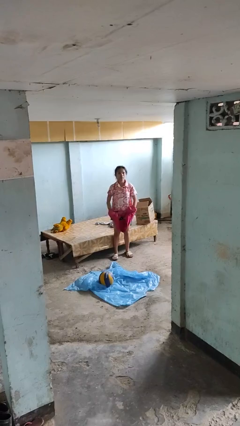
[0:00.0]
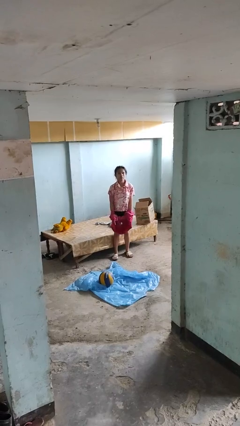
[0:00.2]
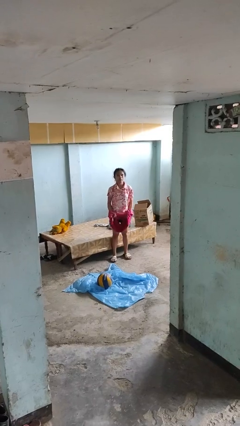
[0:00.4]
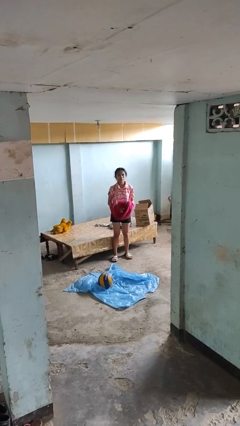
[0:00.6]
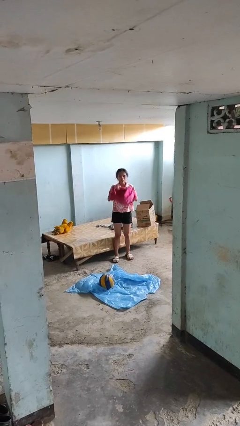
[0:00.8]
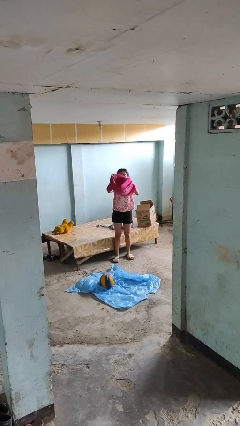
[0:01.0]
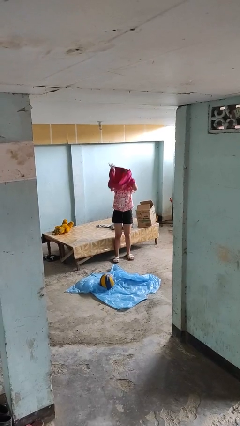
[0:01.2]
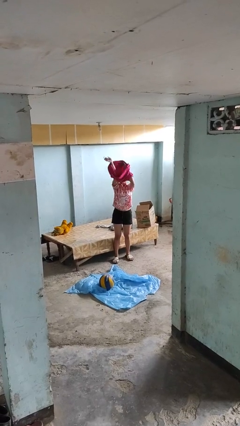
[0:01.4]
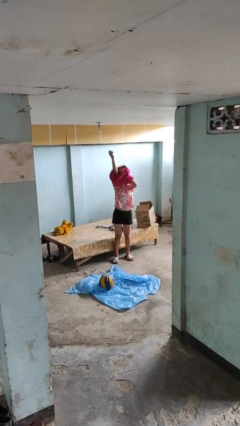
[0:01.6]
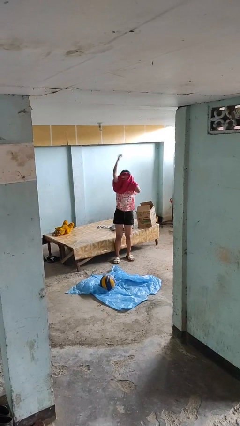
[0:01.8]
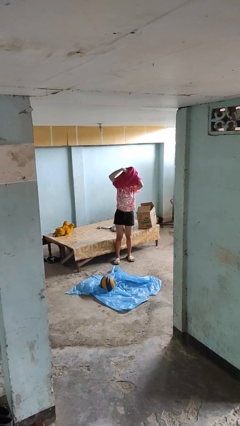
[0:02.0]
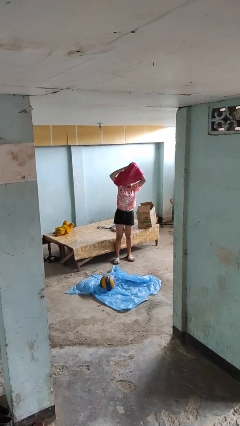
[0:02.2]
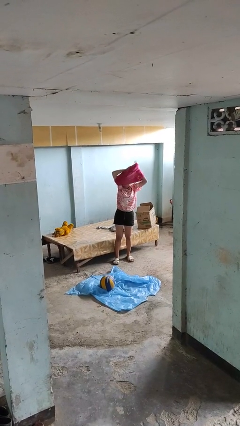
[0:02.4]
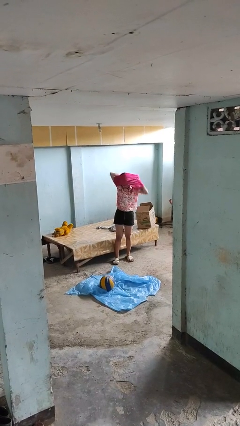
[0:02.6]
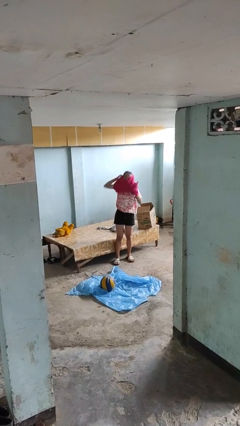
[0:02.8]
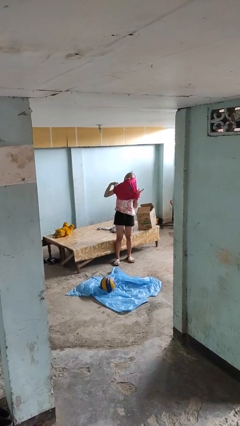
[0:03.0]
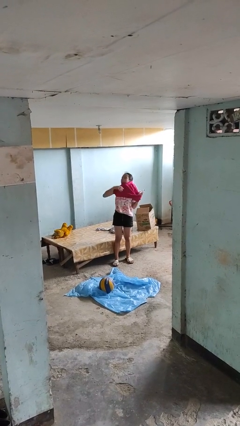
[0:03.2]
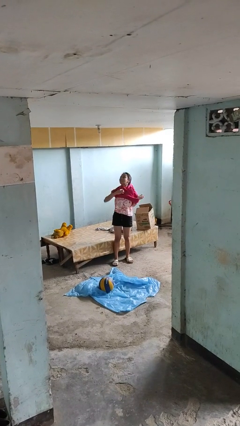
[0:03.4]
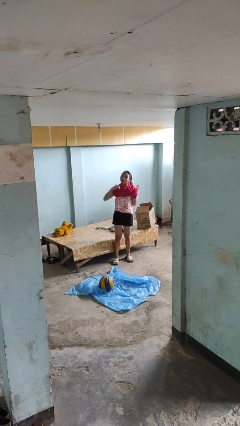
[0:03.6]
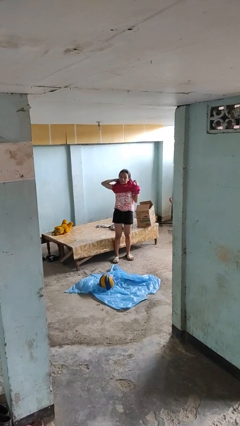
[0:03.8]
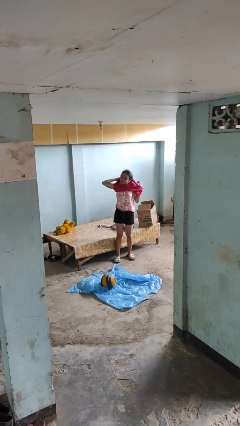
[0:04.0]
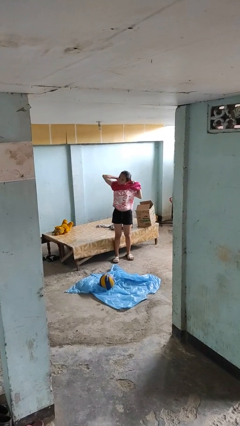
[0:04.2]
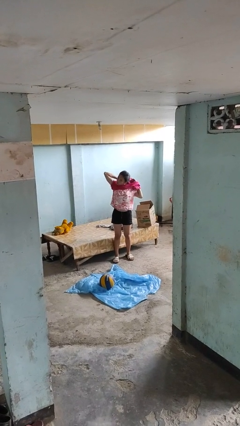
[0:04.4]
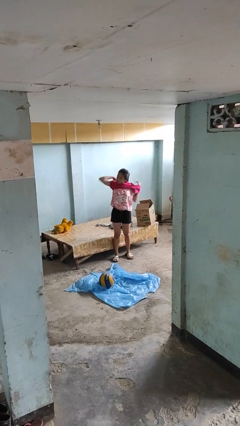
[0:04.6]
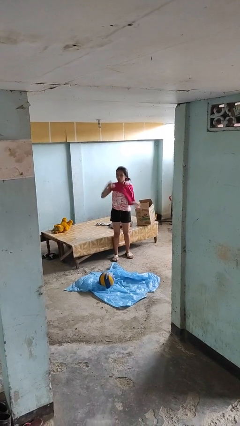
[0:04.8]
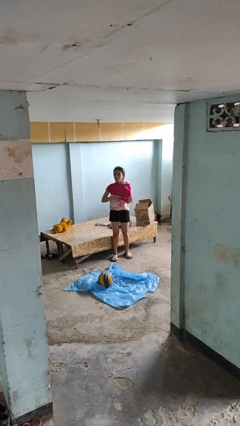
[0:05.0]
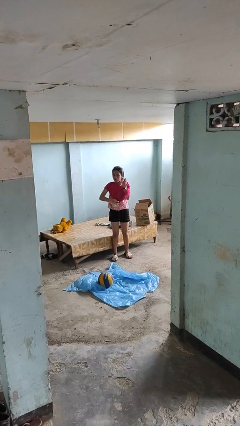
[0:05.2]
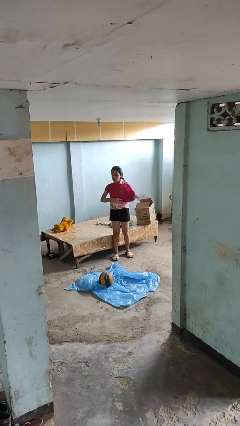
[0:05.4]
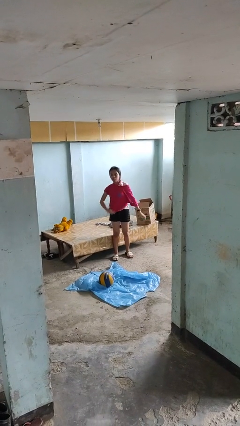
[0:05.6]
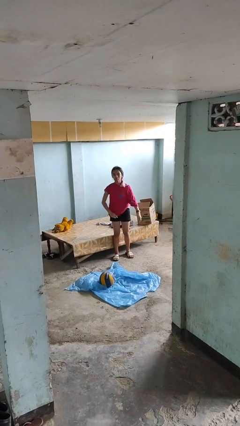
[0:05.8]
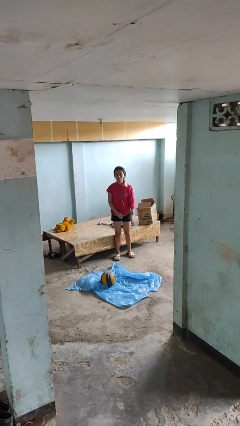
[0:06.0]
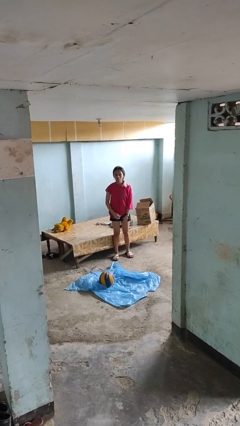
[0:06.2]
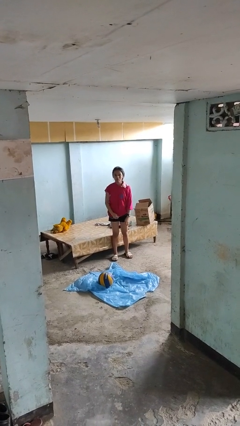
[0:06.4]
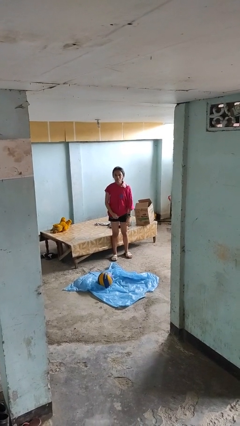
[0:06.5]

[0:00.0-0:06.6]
person puts on shirt

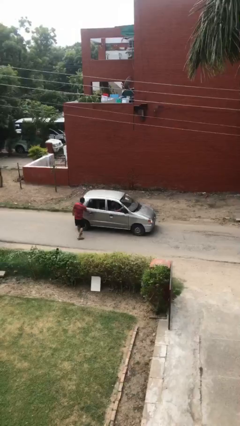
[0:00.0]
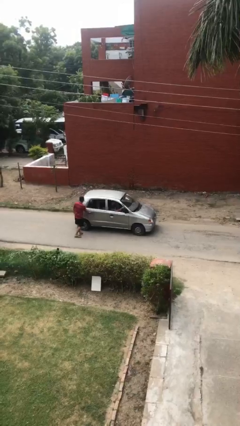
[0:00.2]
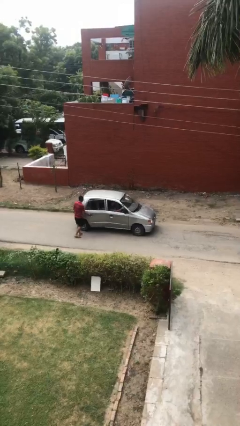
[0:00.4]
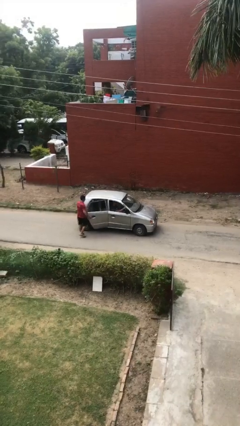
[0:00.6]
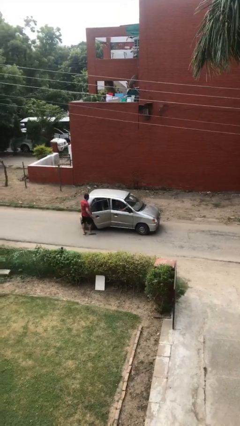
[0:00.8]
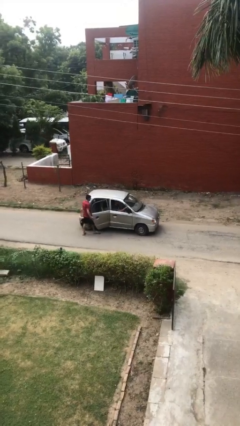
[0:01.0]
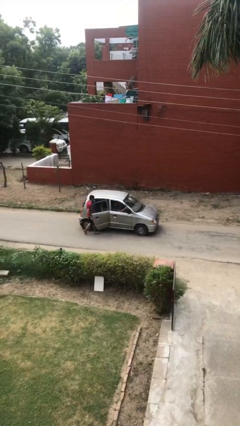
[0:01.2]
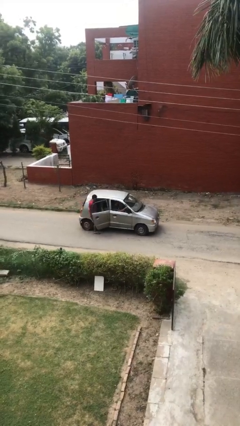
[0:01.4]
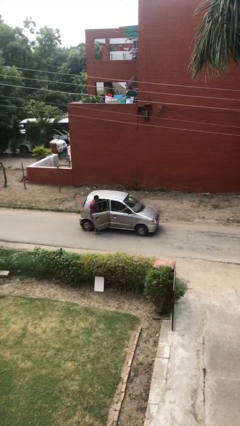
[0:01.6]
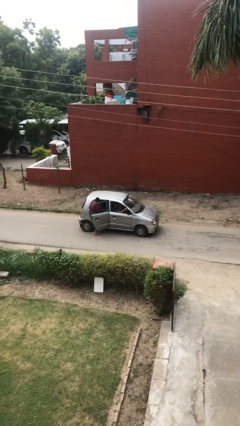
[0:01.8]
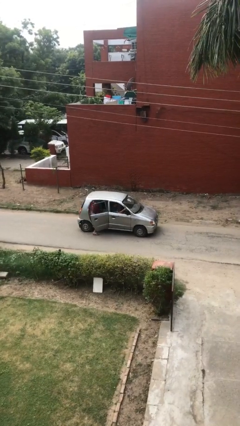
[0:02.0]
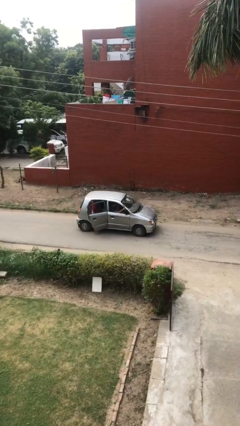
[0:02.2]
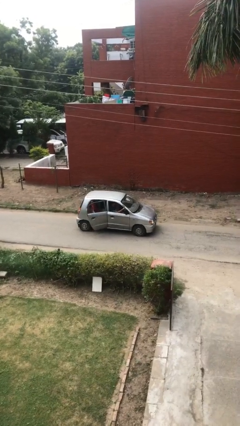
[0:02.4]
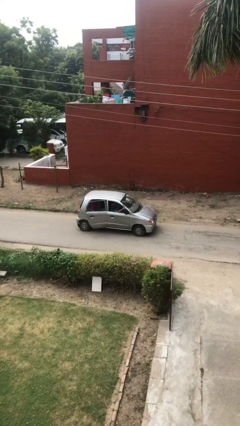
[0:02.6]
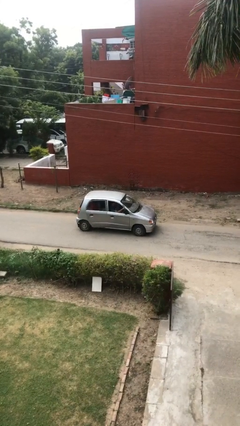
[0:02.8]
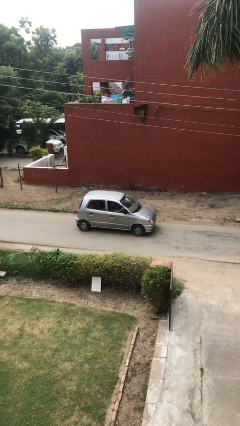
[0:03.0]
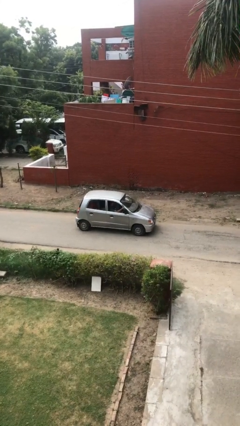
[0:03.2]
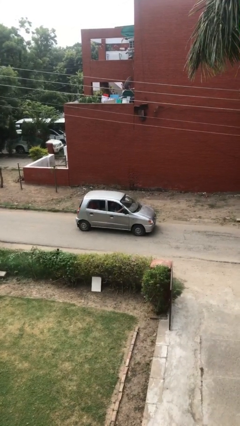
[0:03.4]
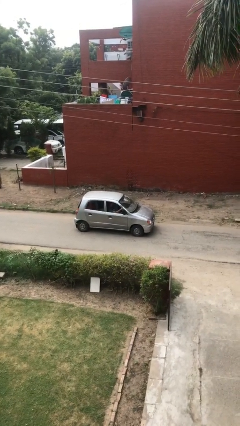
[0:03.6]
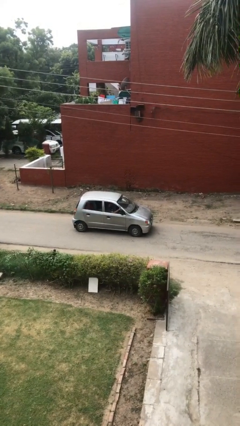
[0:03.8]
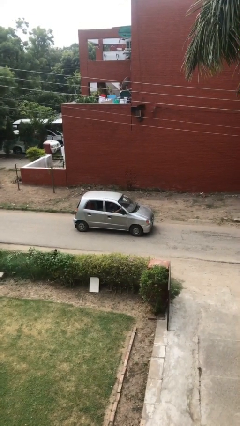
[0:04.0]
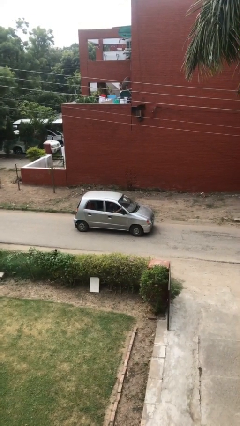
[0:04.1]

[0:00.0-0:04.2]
car picks up person

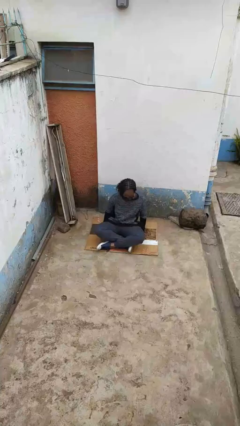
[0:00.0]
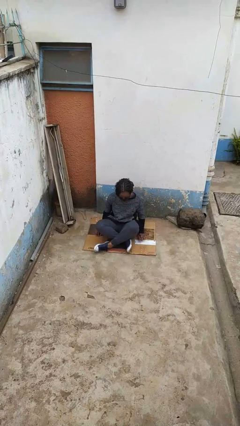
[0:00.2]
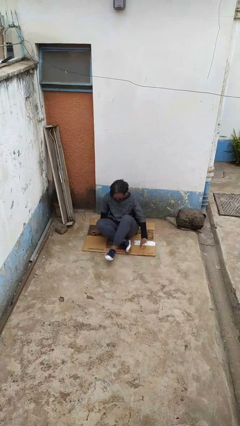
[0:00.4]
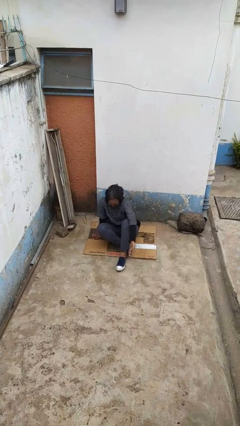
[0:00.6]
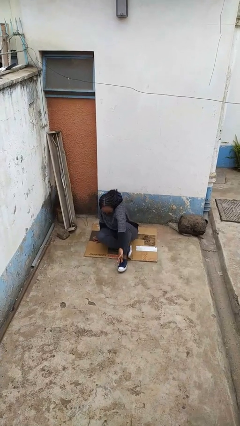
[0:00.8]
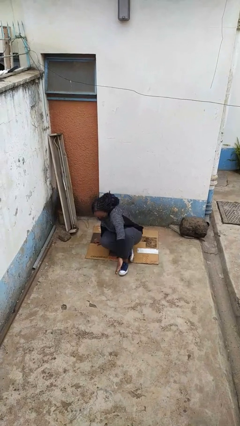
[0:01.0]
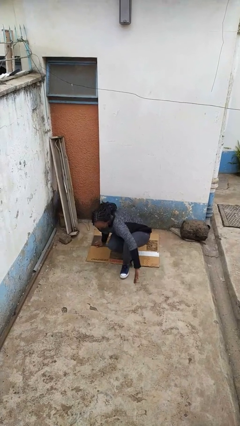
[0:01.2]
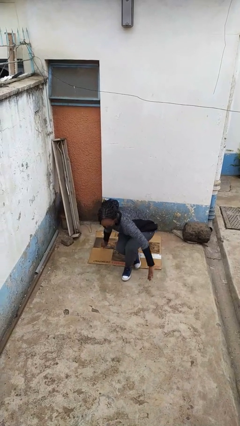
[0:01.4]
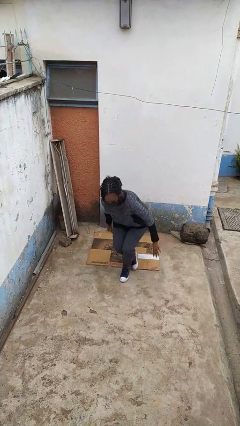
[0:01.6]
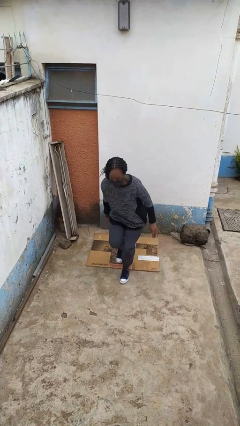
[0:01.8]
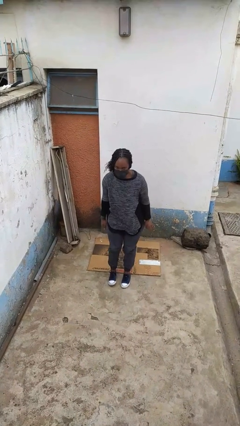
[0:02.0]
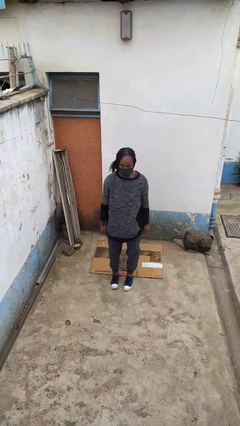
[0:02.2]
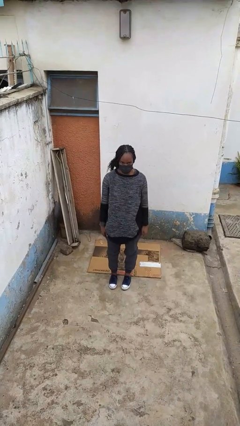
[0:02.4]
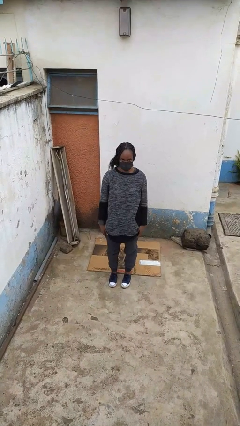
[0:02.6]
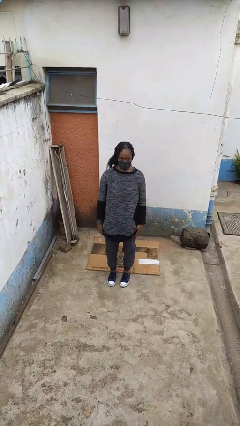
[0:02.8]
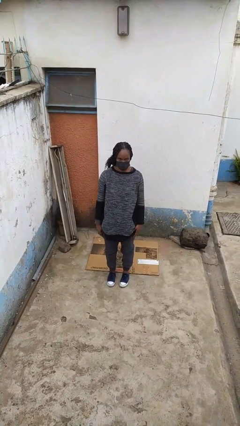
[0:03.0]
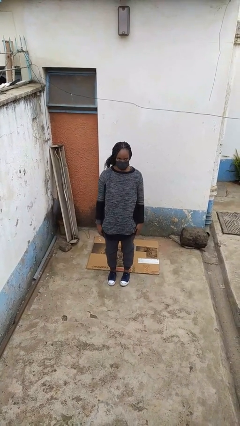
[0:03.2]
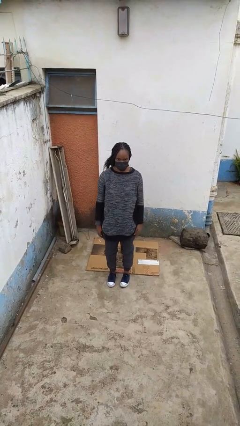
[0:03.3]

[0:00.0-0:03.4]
person stands up from floor

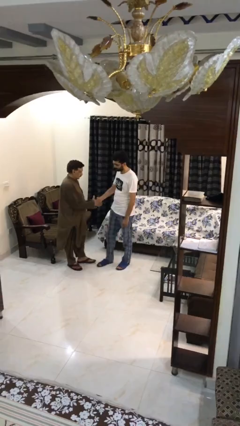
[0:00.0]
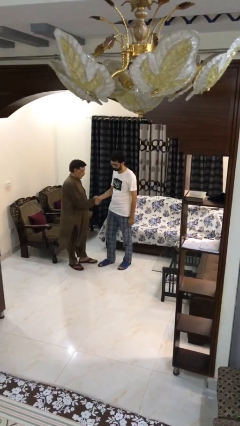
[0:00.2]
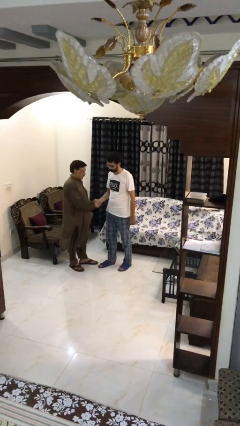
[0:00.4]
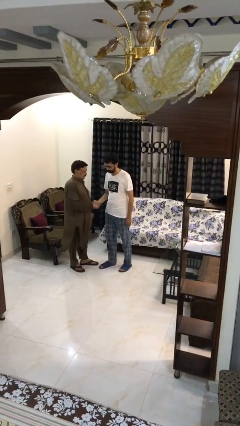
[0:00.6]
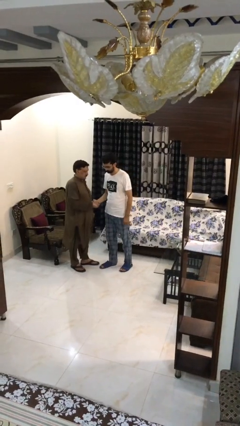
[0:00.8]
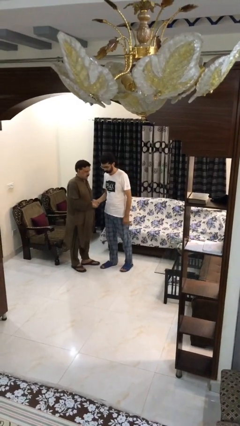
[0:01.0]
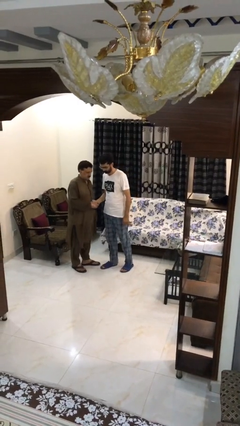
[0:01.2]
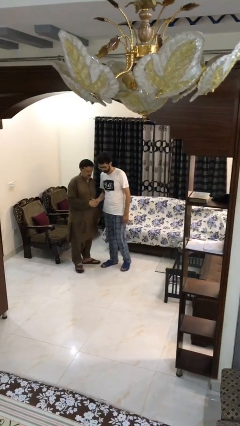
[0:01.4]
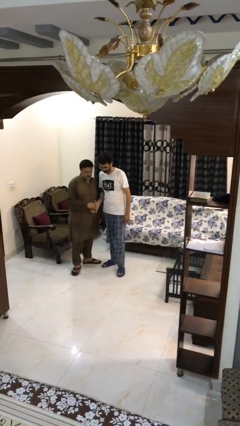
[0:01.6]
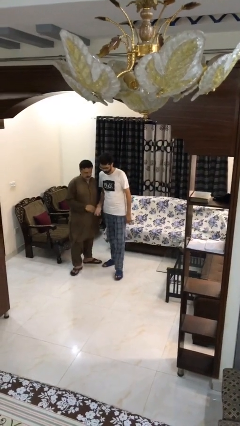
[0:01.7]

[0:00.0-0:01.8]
person shakes hand

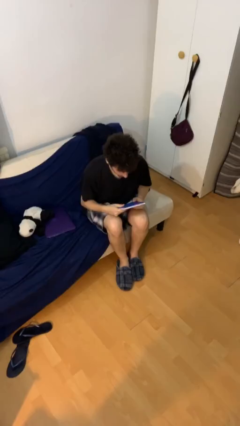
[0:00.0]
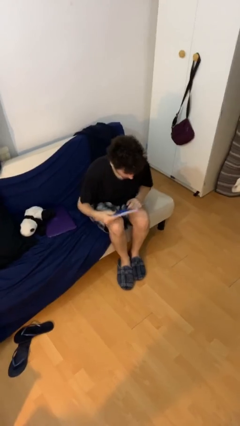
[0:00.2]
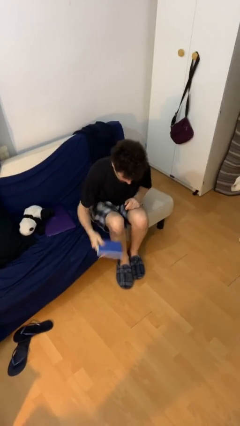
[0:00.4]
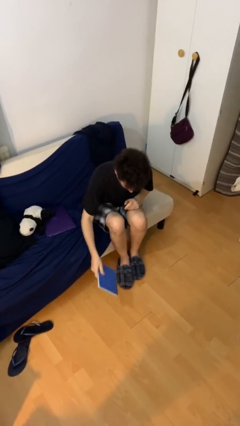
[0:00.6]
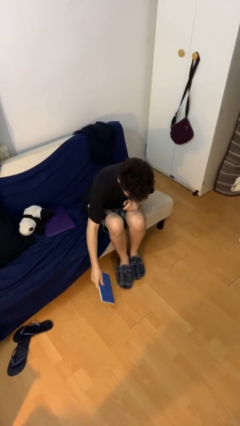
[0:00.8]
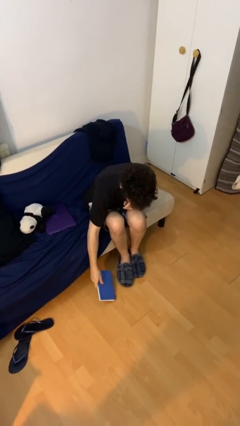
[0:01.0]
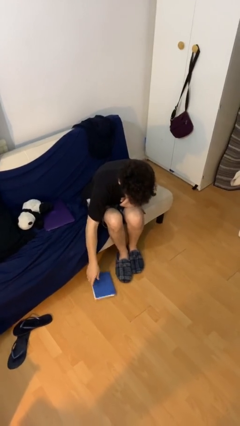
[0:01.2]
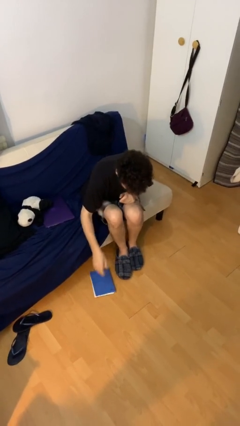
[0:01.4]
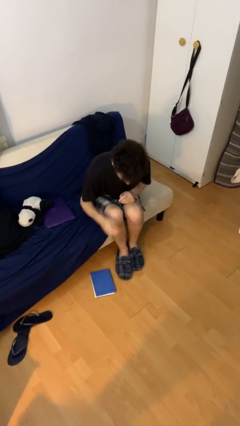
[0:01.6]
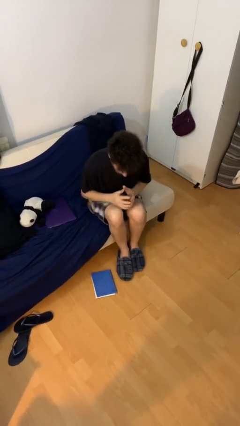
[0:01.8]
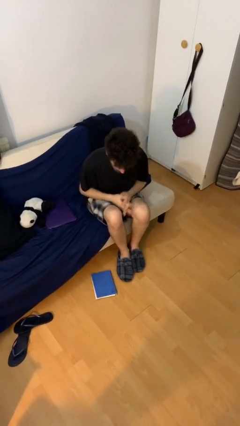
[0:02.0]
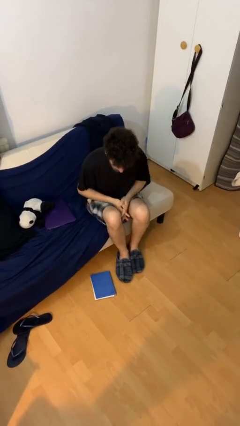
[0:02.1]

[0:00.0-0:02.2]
person puts down object on floor
